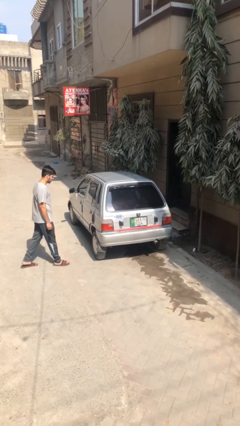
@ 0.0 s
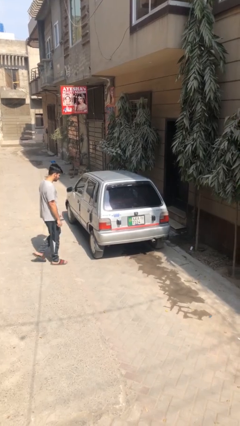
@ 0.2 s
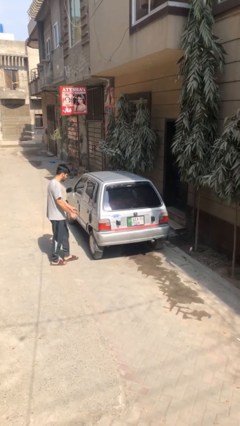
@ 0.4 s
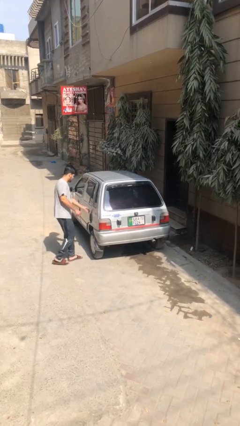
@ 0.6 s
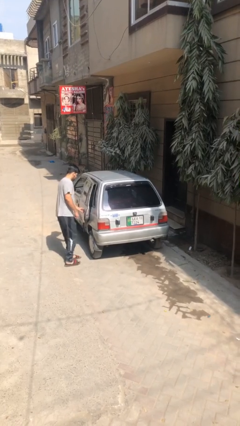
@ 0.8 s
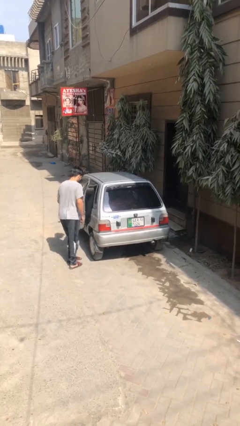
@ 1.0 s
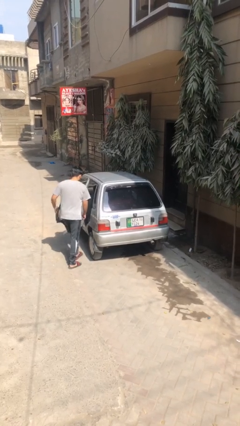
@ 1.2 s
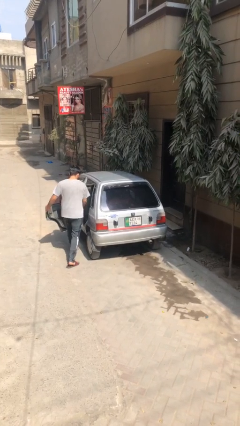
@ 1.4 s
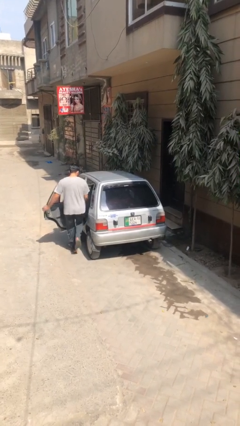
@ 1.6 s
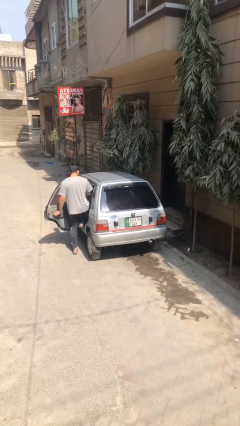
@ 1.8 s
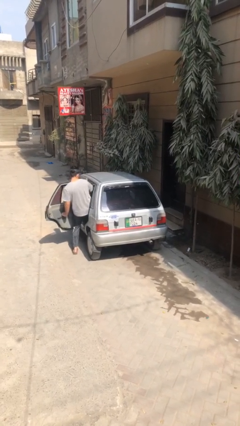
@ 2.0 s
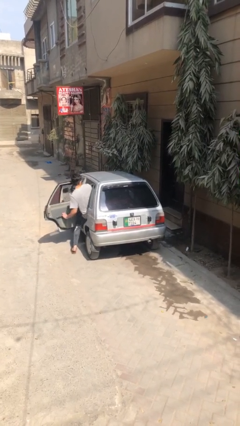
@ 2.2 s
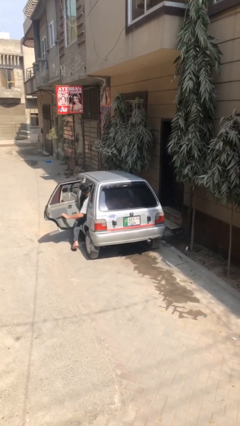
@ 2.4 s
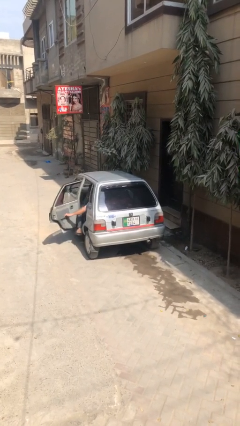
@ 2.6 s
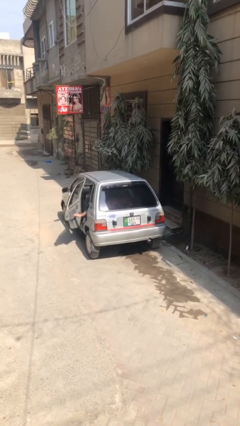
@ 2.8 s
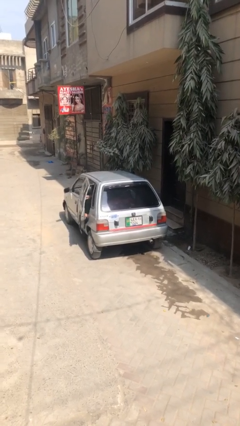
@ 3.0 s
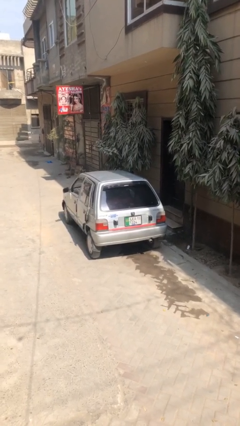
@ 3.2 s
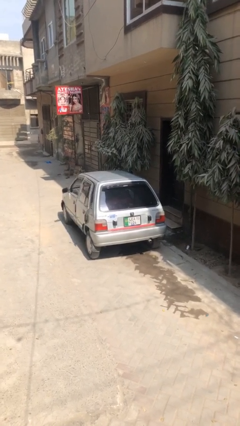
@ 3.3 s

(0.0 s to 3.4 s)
car picks up person

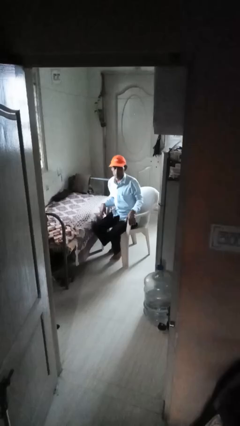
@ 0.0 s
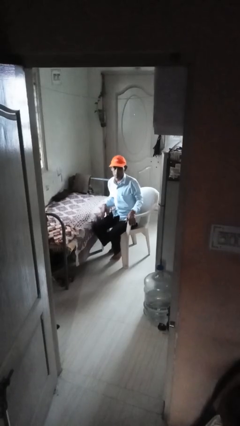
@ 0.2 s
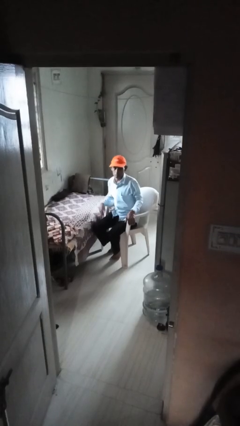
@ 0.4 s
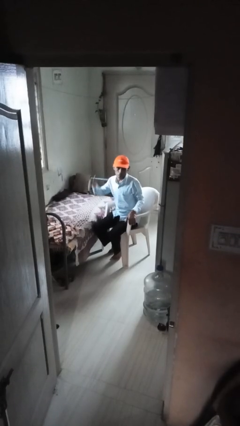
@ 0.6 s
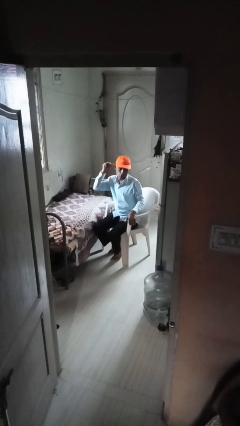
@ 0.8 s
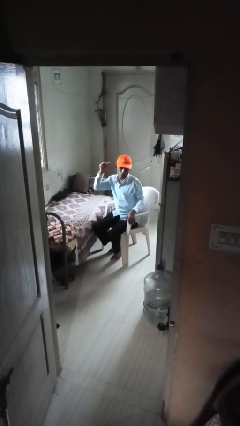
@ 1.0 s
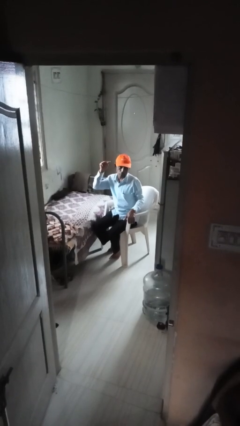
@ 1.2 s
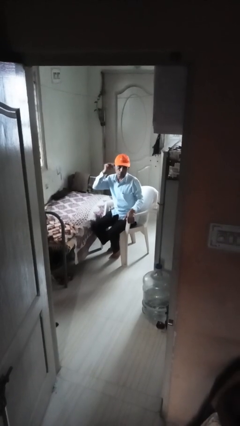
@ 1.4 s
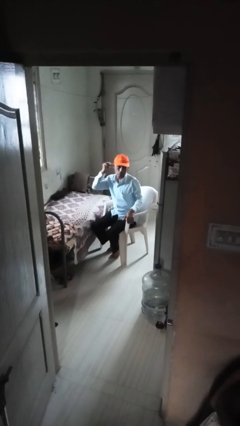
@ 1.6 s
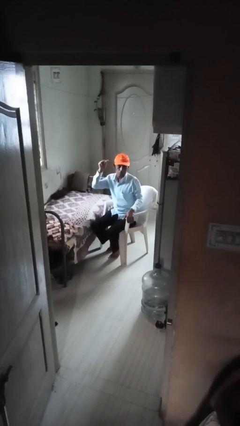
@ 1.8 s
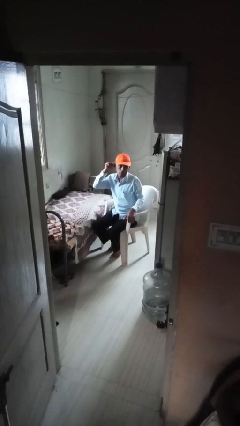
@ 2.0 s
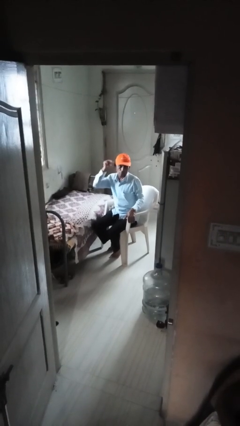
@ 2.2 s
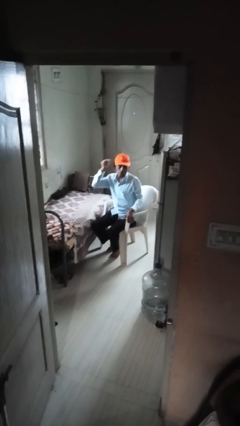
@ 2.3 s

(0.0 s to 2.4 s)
person gestures behind me

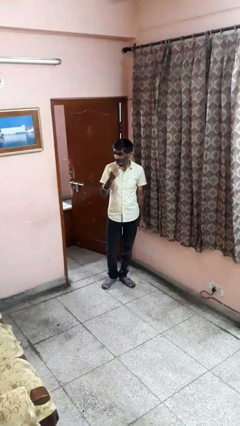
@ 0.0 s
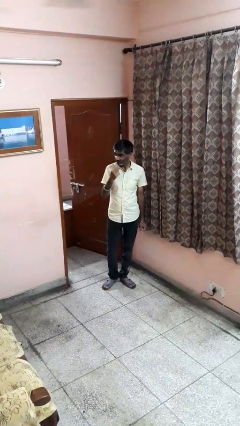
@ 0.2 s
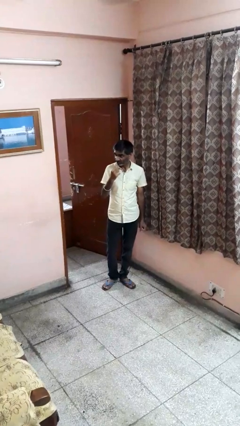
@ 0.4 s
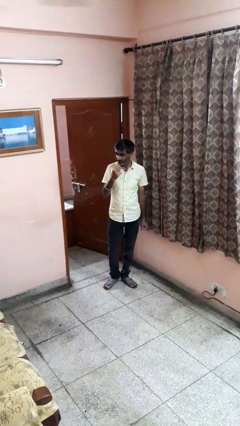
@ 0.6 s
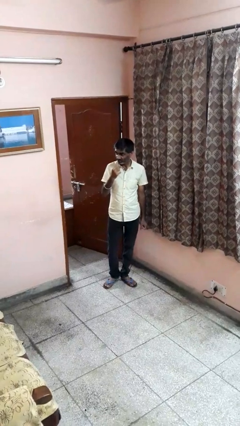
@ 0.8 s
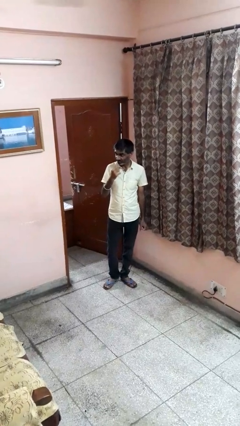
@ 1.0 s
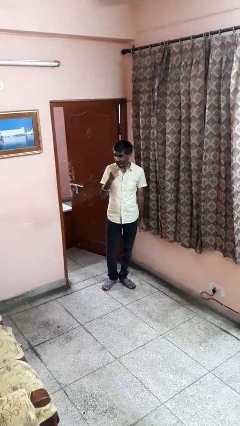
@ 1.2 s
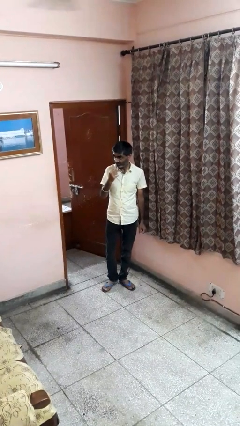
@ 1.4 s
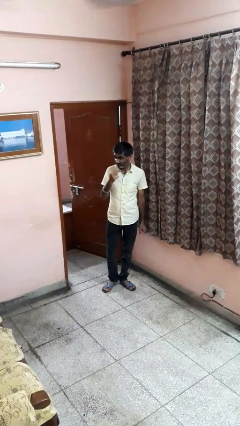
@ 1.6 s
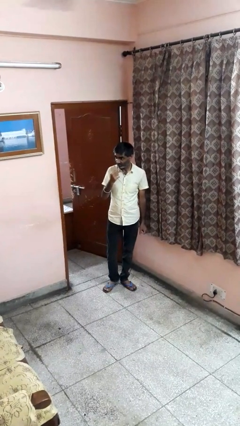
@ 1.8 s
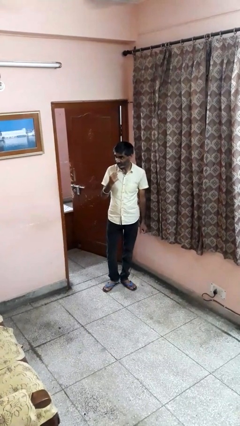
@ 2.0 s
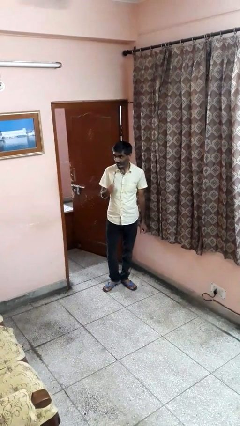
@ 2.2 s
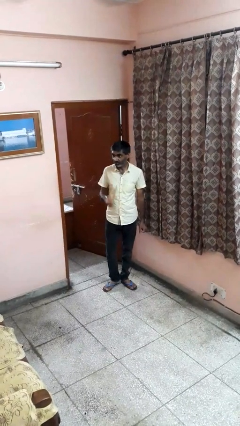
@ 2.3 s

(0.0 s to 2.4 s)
person brushes teeth

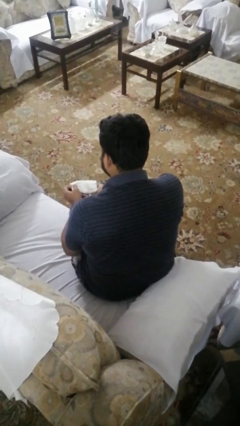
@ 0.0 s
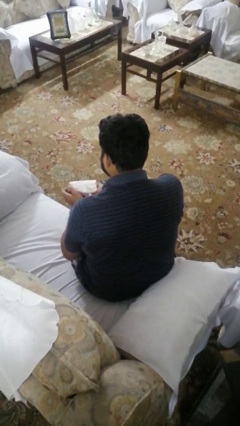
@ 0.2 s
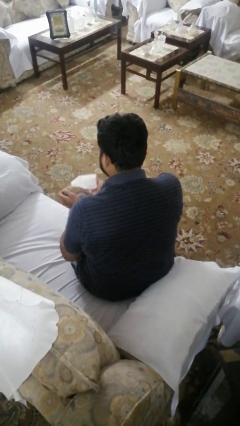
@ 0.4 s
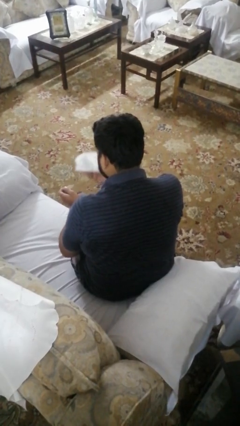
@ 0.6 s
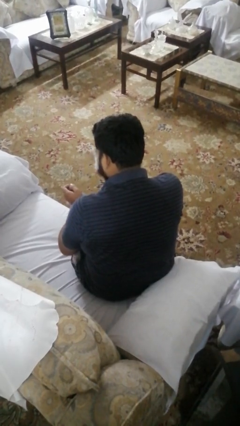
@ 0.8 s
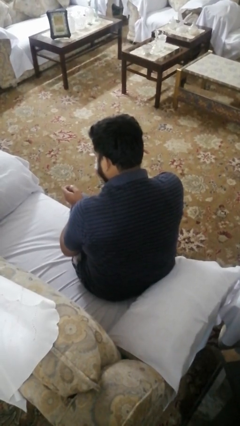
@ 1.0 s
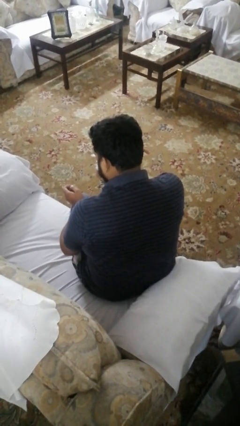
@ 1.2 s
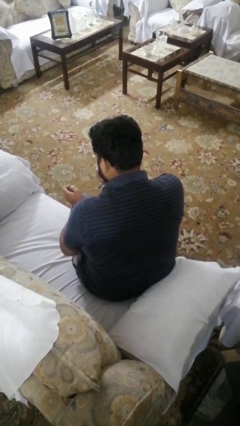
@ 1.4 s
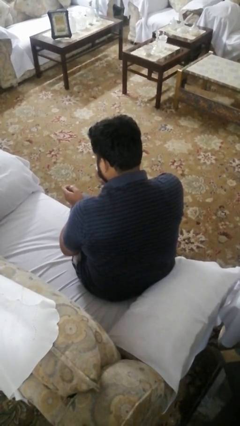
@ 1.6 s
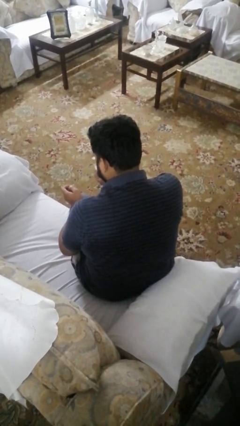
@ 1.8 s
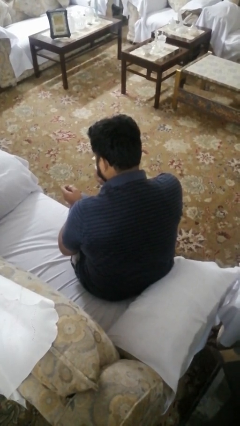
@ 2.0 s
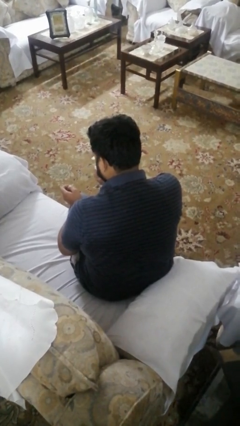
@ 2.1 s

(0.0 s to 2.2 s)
person blows nose

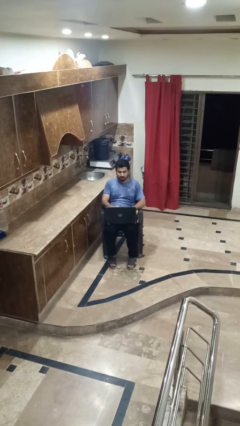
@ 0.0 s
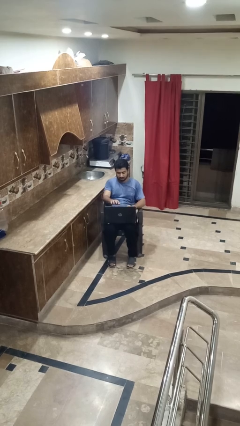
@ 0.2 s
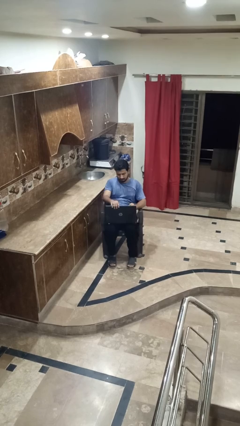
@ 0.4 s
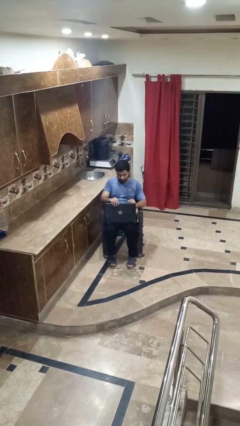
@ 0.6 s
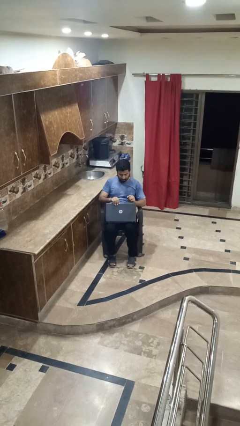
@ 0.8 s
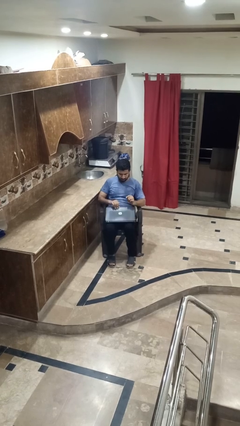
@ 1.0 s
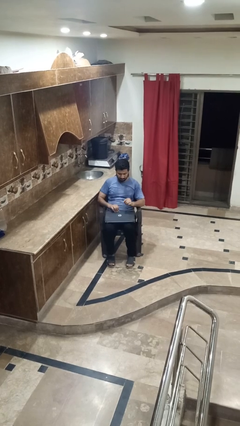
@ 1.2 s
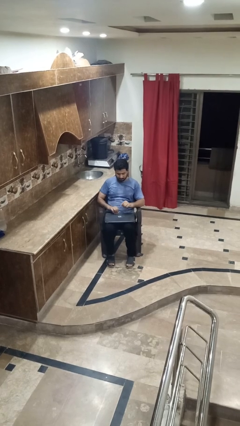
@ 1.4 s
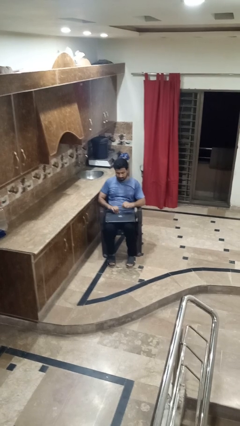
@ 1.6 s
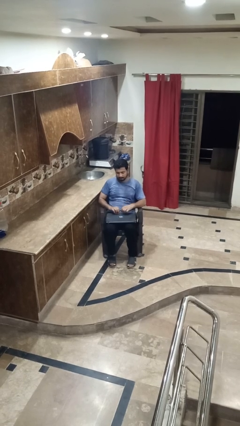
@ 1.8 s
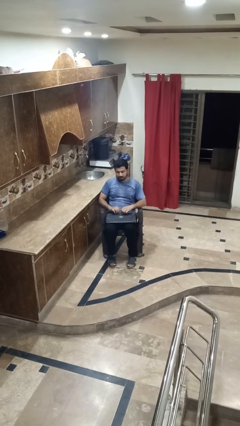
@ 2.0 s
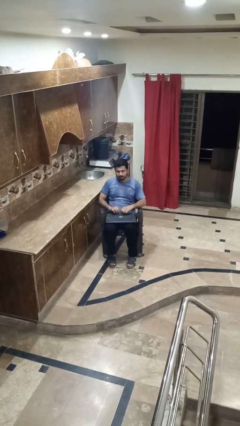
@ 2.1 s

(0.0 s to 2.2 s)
person closes laptop

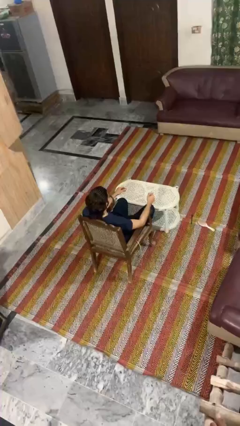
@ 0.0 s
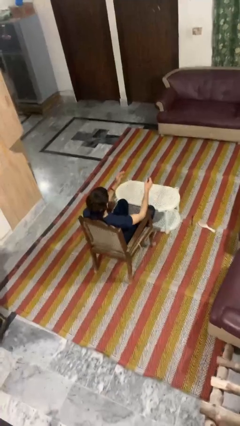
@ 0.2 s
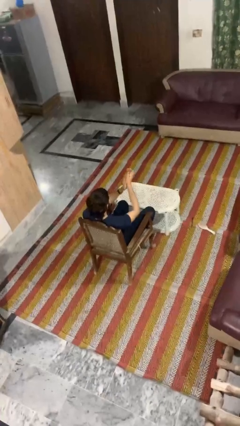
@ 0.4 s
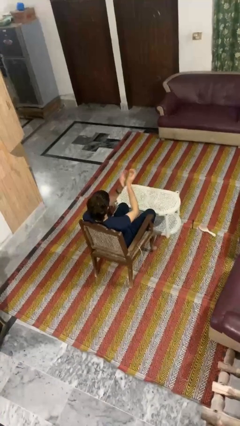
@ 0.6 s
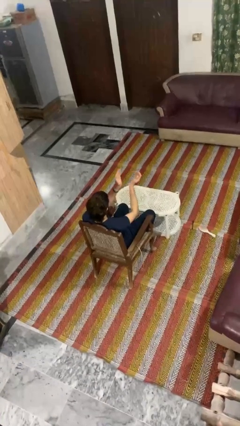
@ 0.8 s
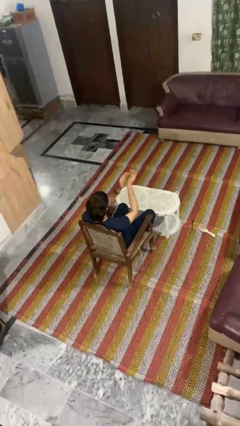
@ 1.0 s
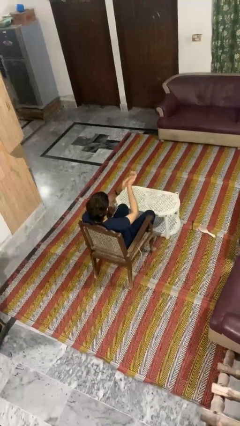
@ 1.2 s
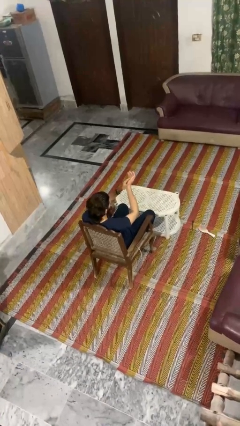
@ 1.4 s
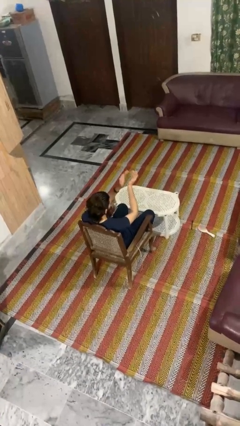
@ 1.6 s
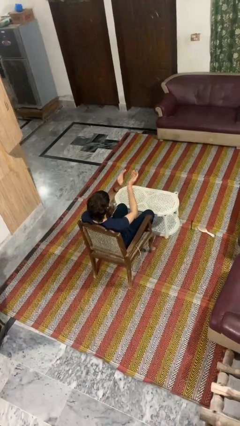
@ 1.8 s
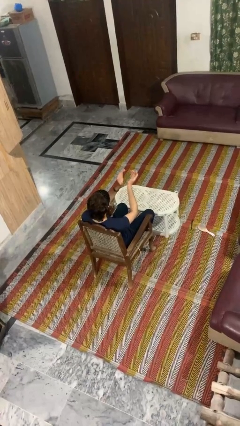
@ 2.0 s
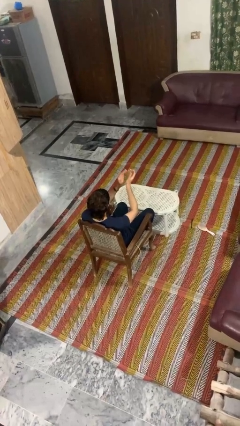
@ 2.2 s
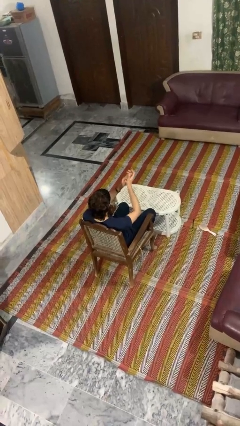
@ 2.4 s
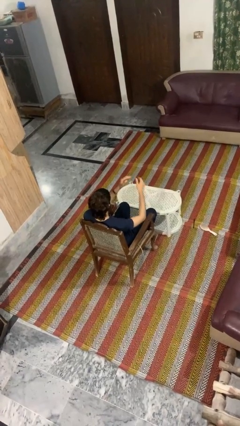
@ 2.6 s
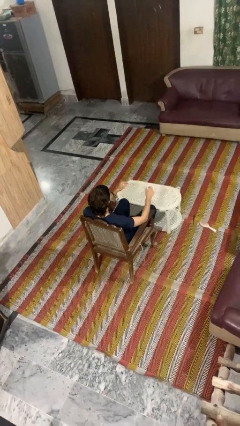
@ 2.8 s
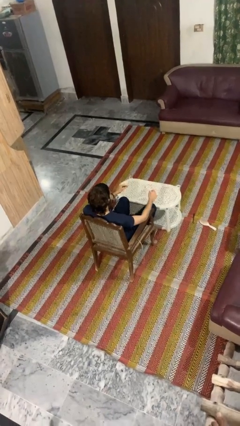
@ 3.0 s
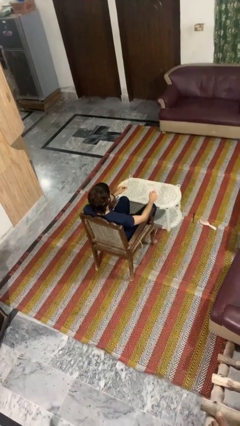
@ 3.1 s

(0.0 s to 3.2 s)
person claps hands

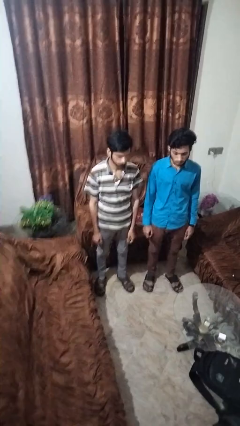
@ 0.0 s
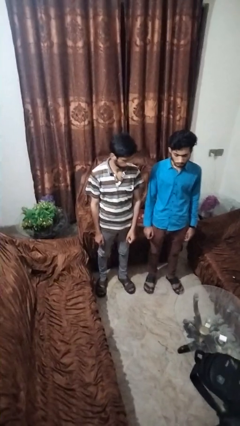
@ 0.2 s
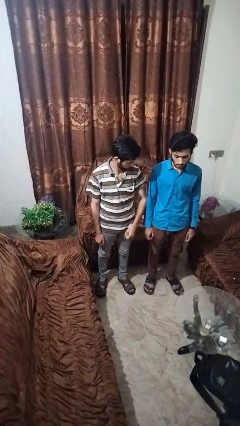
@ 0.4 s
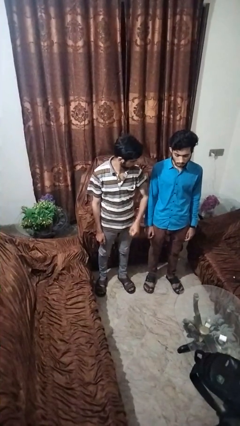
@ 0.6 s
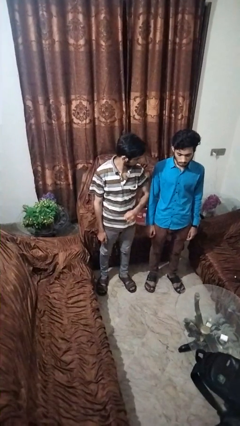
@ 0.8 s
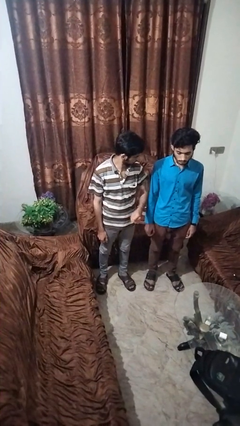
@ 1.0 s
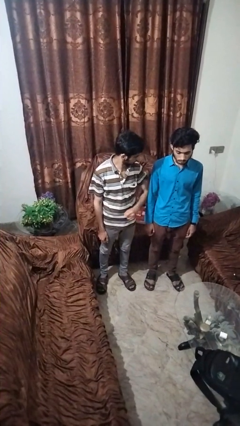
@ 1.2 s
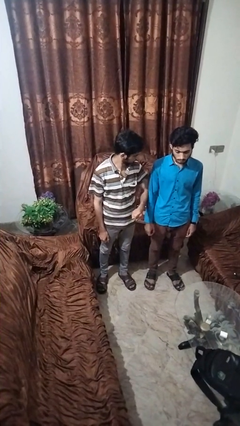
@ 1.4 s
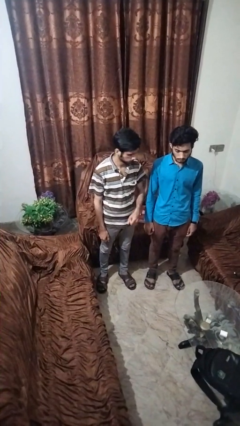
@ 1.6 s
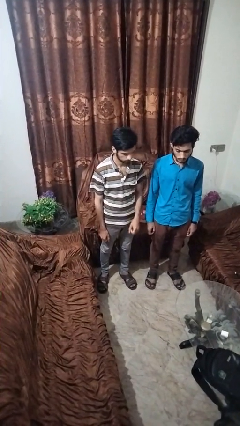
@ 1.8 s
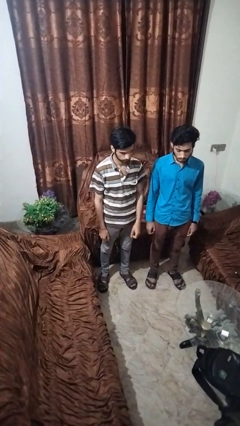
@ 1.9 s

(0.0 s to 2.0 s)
person nudges person with elbow
